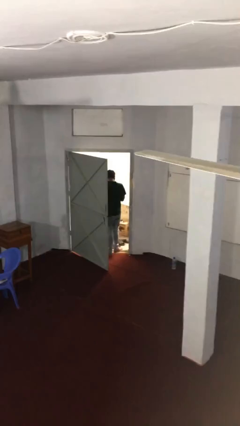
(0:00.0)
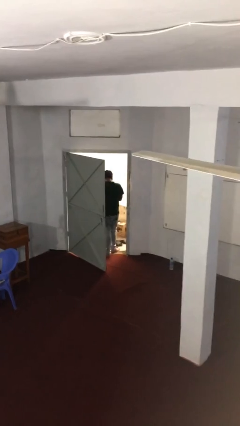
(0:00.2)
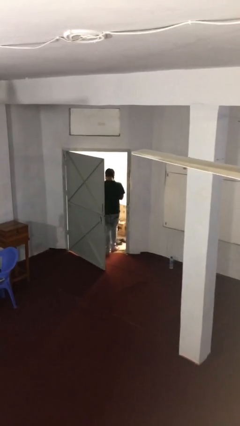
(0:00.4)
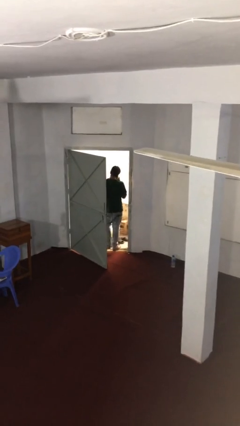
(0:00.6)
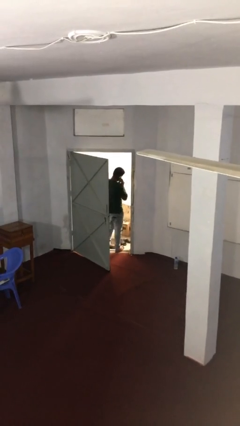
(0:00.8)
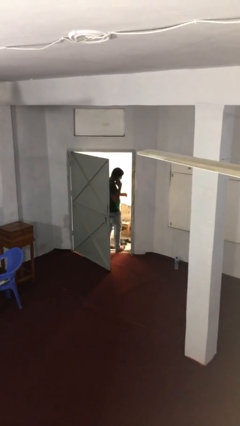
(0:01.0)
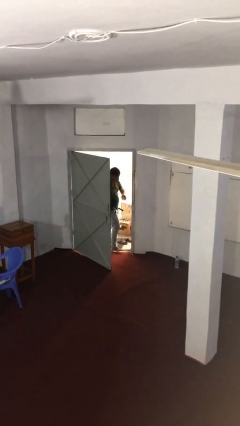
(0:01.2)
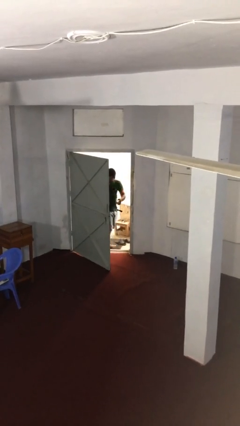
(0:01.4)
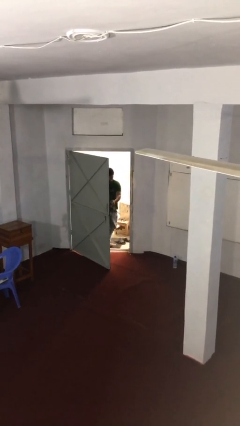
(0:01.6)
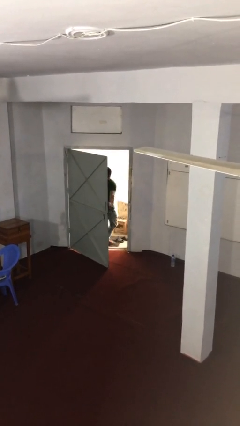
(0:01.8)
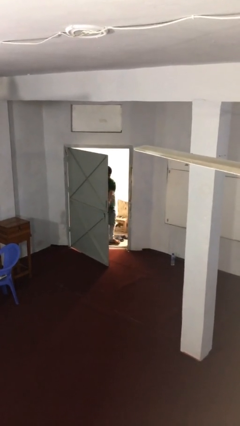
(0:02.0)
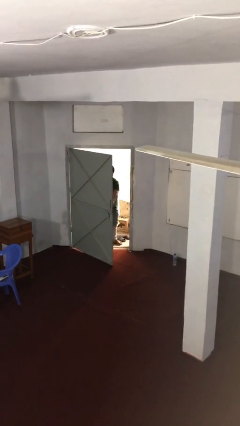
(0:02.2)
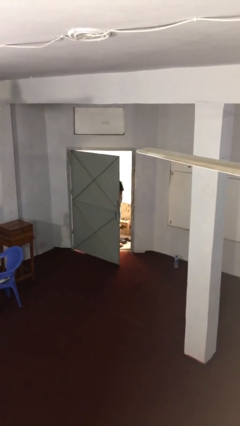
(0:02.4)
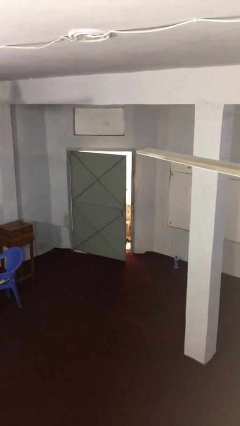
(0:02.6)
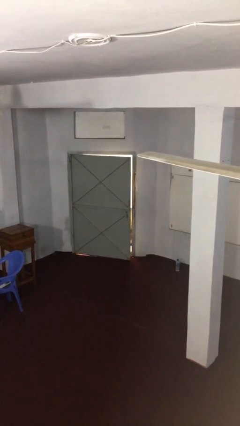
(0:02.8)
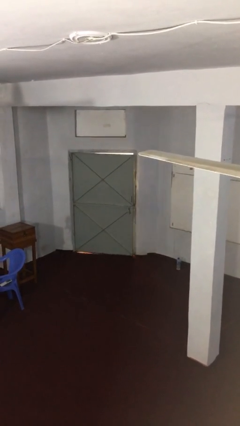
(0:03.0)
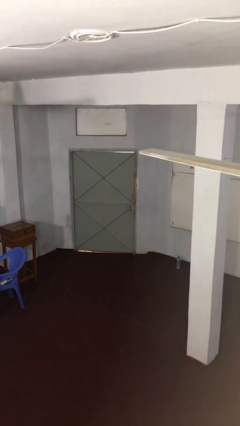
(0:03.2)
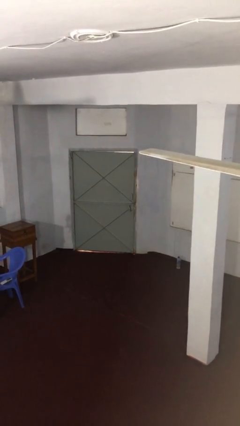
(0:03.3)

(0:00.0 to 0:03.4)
person closes facility door

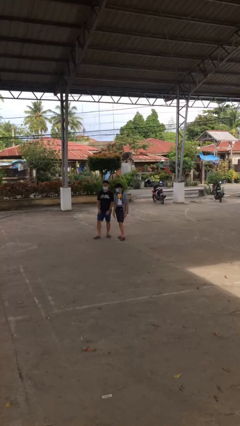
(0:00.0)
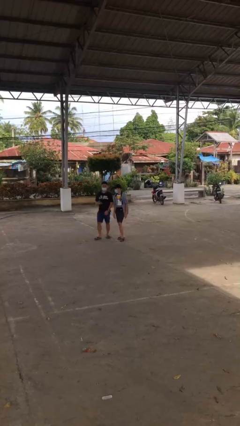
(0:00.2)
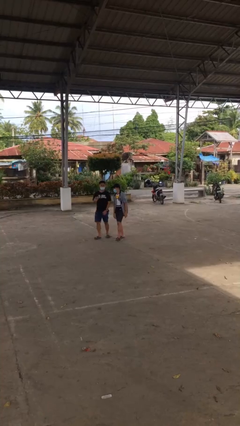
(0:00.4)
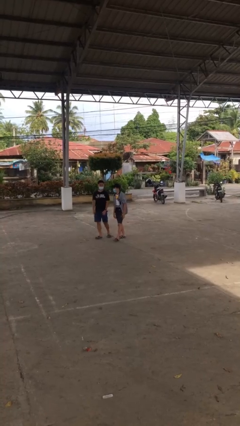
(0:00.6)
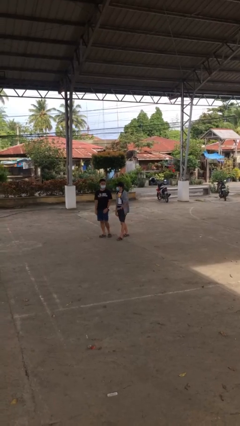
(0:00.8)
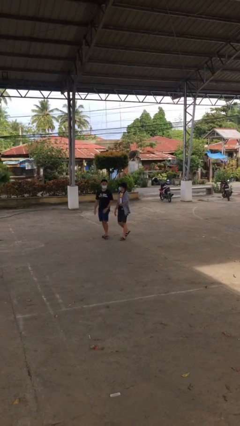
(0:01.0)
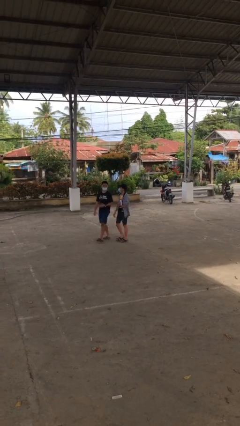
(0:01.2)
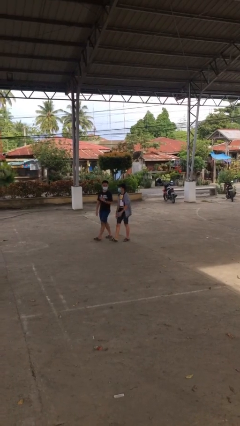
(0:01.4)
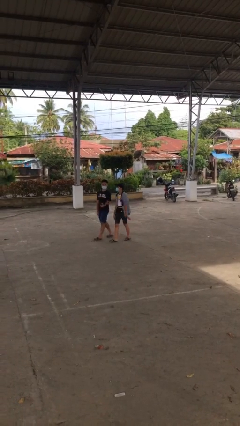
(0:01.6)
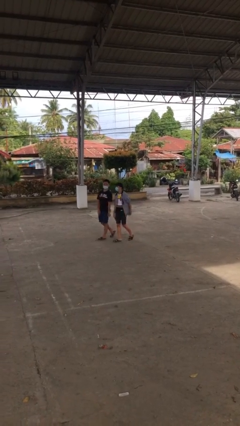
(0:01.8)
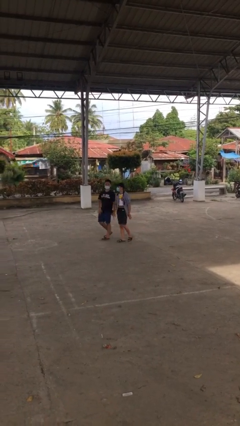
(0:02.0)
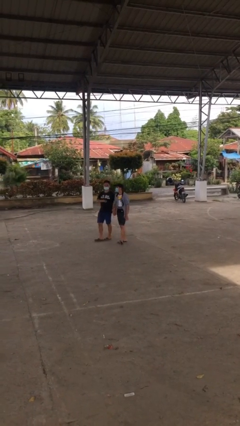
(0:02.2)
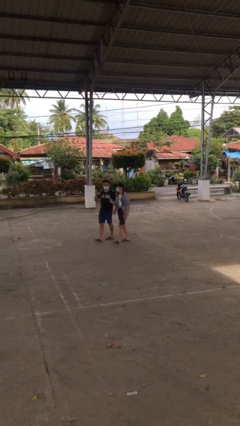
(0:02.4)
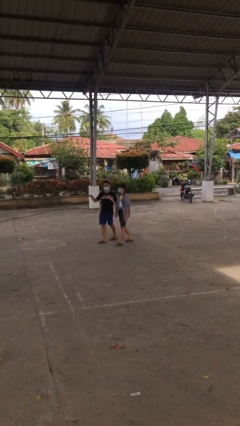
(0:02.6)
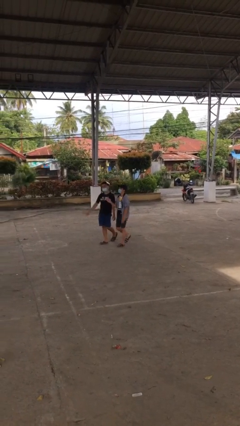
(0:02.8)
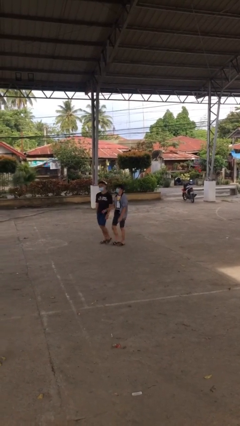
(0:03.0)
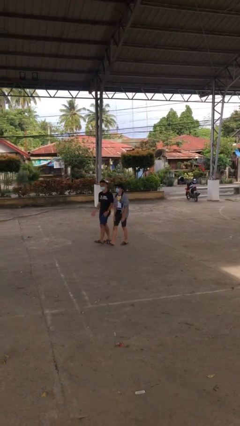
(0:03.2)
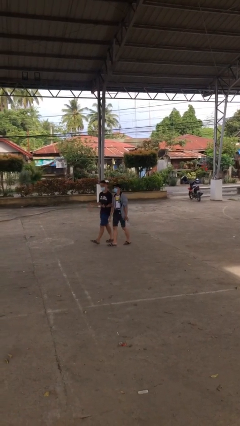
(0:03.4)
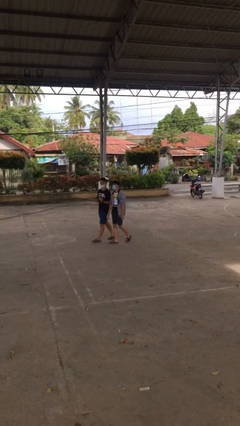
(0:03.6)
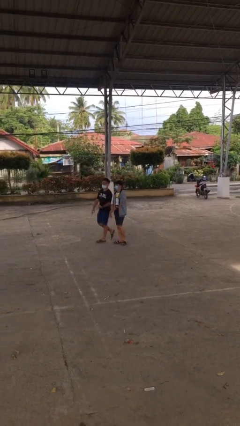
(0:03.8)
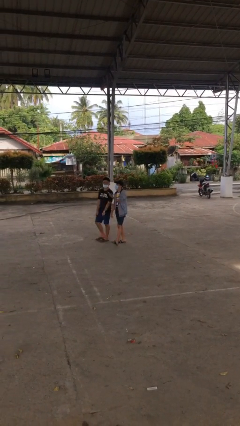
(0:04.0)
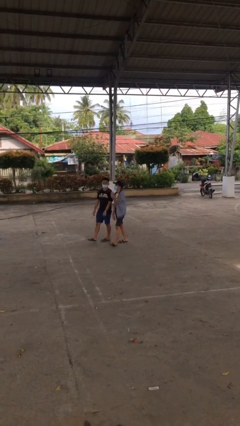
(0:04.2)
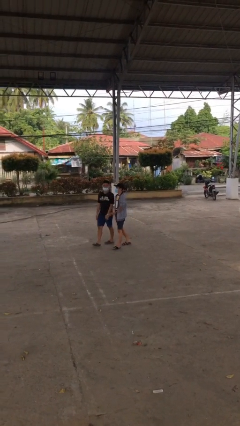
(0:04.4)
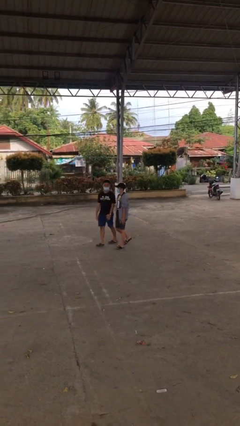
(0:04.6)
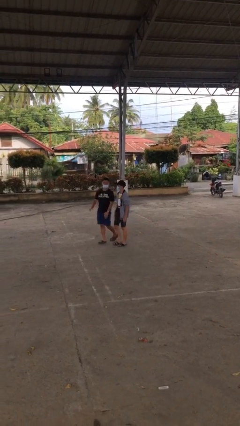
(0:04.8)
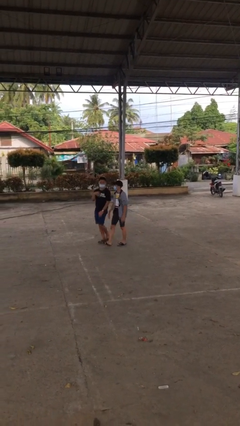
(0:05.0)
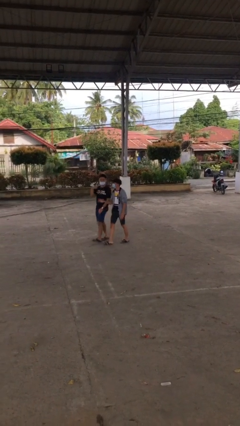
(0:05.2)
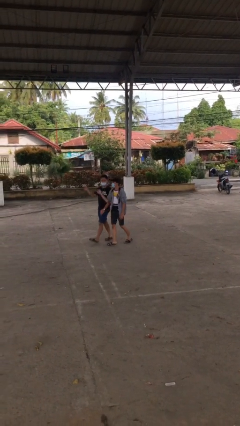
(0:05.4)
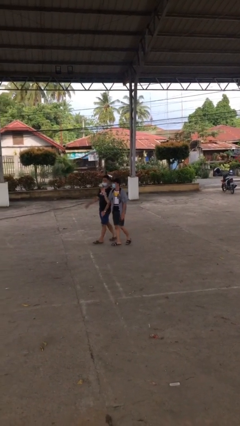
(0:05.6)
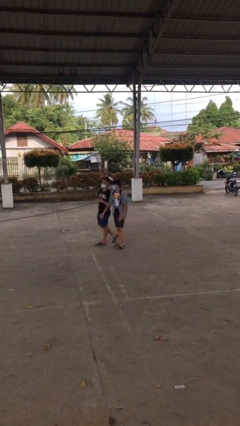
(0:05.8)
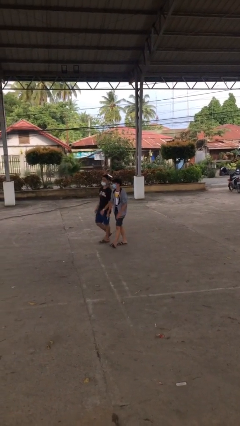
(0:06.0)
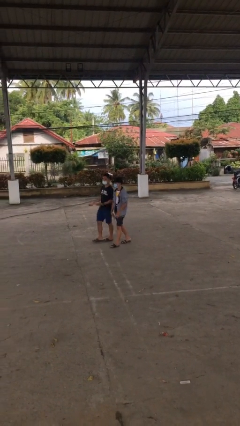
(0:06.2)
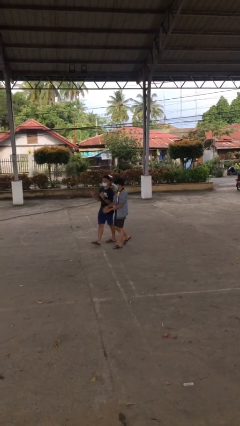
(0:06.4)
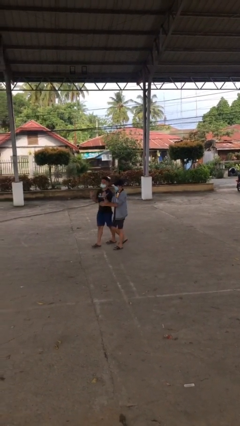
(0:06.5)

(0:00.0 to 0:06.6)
person talks to person

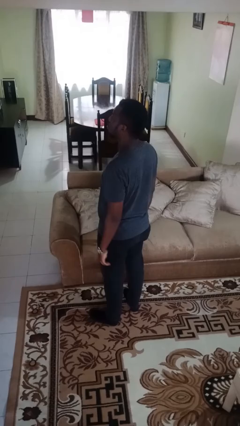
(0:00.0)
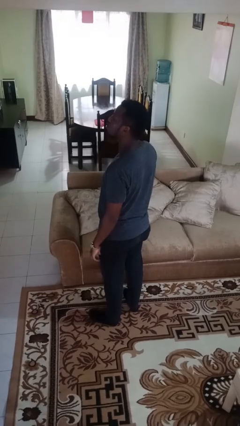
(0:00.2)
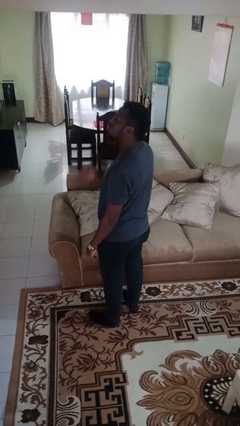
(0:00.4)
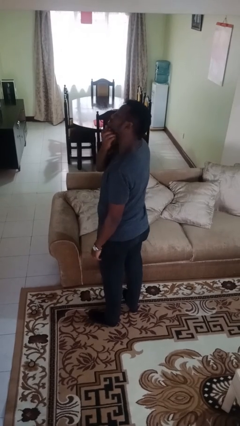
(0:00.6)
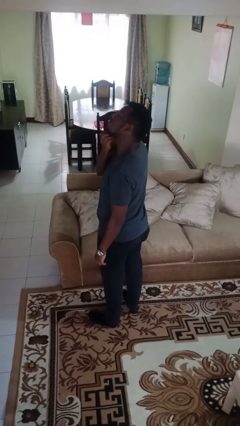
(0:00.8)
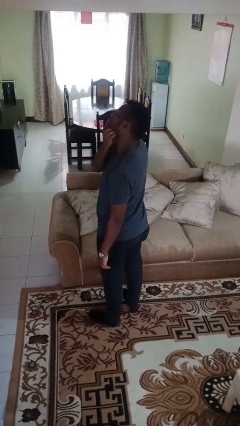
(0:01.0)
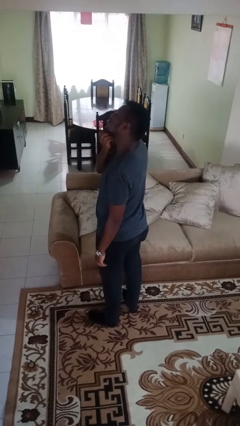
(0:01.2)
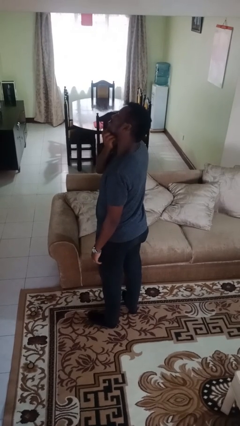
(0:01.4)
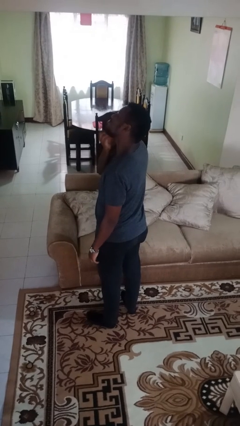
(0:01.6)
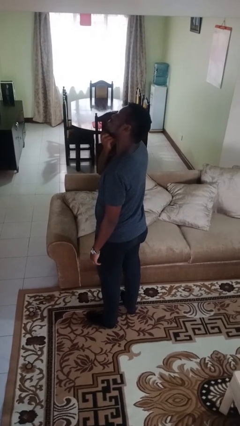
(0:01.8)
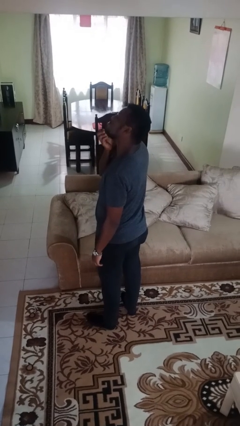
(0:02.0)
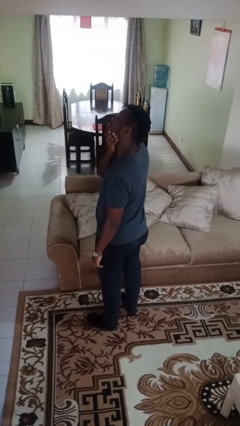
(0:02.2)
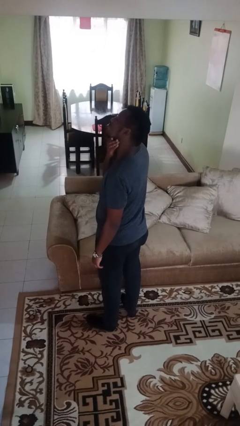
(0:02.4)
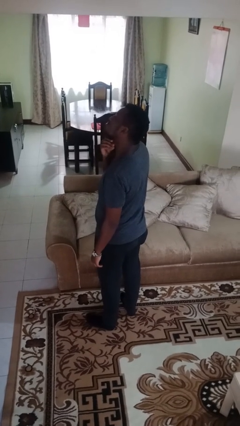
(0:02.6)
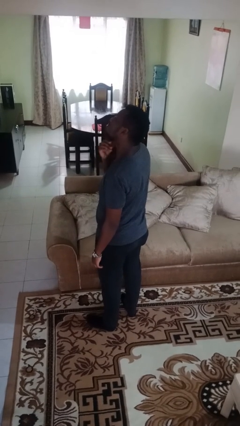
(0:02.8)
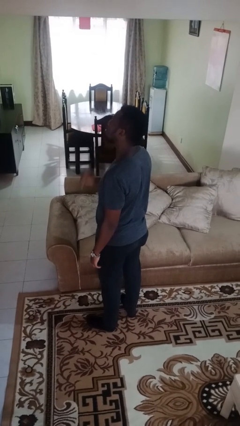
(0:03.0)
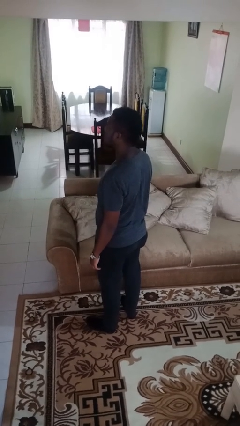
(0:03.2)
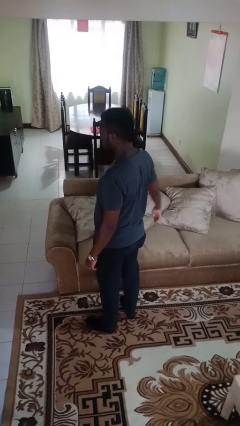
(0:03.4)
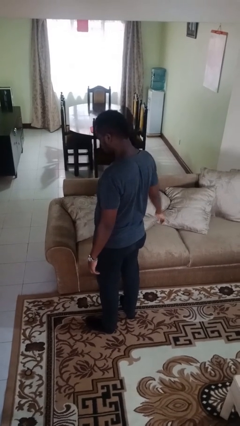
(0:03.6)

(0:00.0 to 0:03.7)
person strokes chin

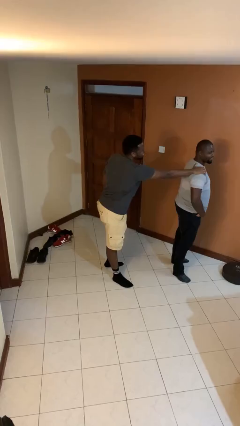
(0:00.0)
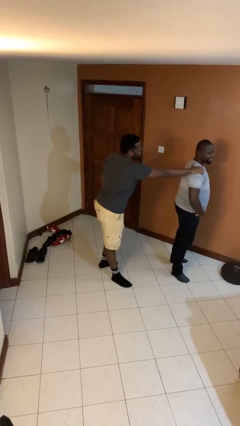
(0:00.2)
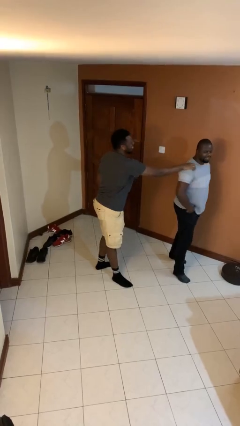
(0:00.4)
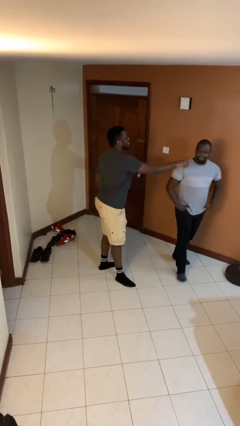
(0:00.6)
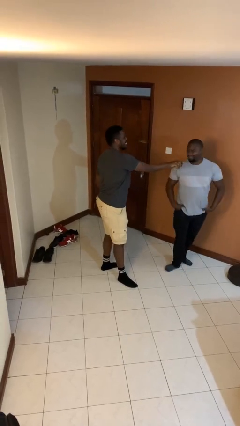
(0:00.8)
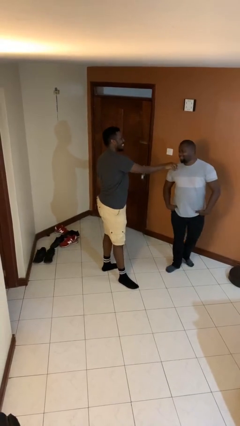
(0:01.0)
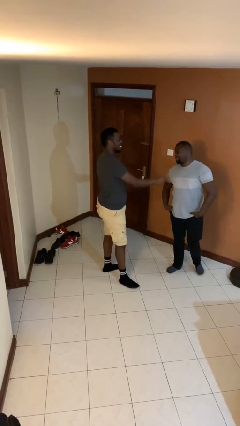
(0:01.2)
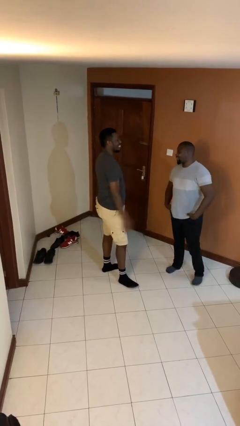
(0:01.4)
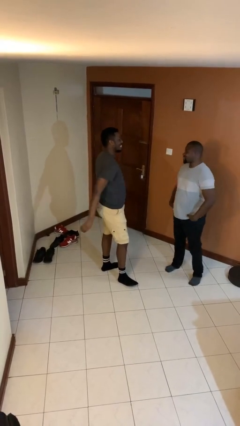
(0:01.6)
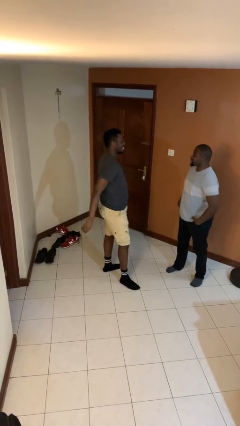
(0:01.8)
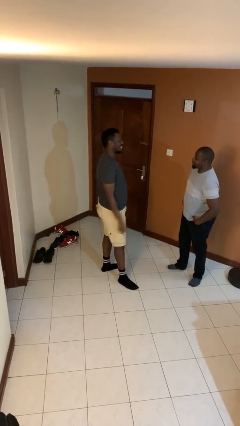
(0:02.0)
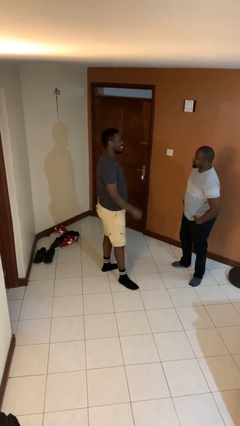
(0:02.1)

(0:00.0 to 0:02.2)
person spins person around

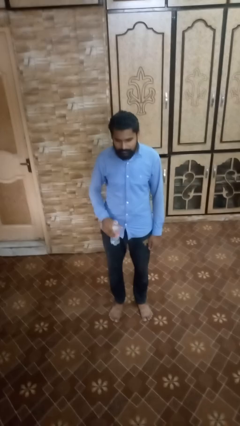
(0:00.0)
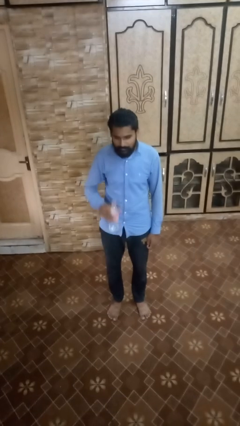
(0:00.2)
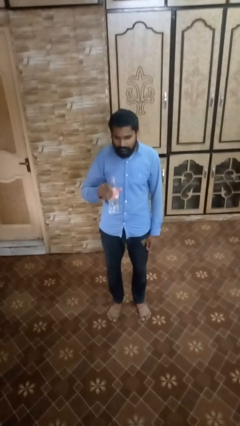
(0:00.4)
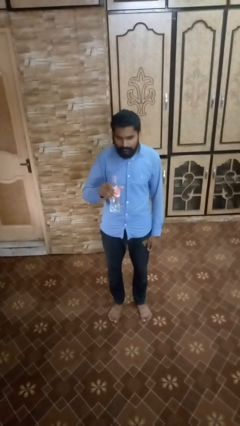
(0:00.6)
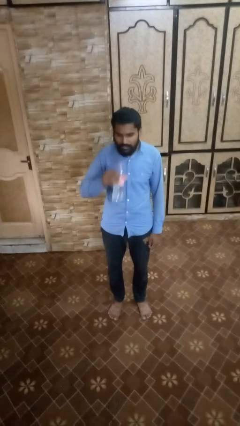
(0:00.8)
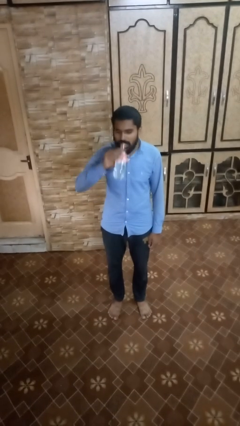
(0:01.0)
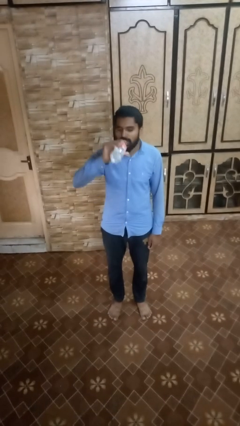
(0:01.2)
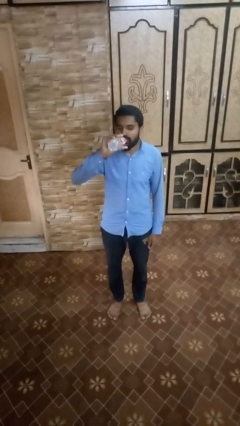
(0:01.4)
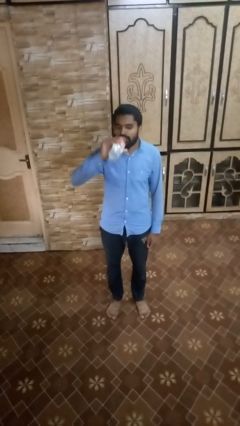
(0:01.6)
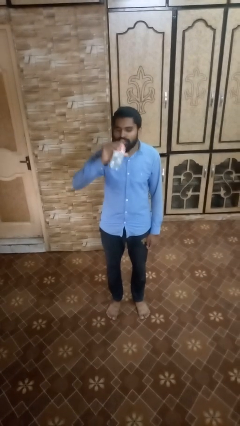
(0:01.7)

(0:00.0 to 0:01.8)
person drinks from bottle
